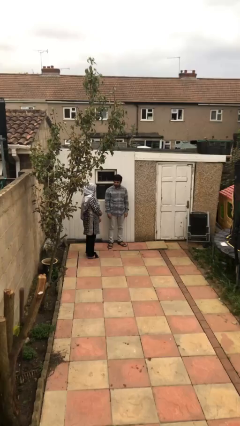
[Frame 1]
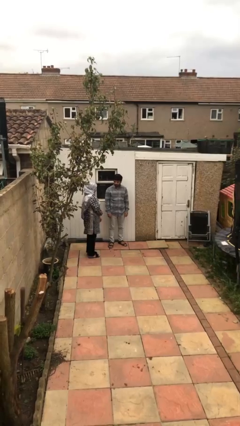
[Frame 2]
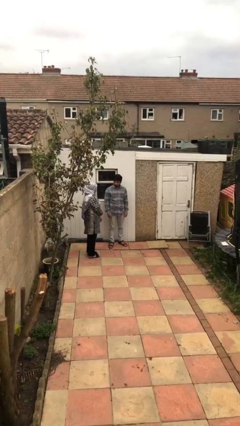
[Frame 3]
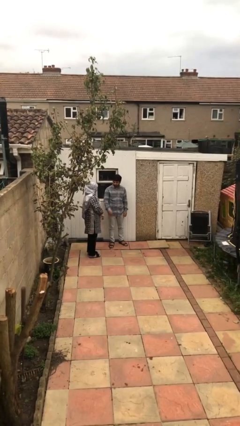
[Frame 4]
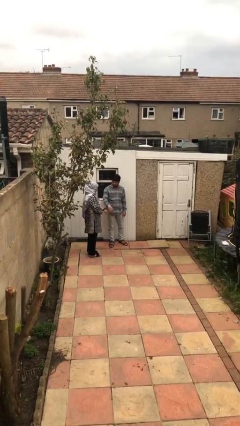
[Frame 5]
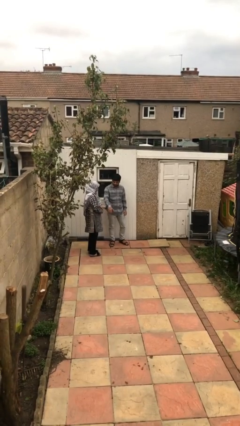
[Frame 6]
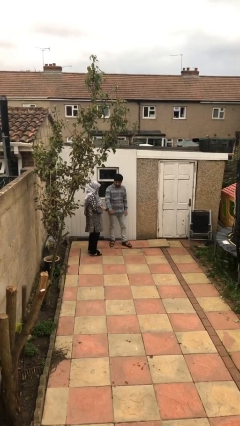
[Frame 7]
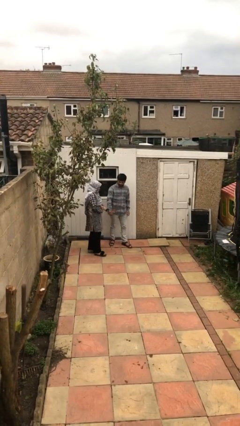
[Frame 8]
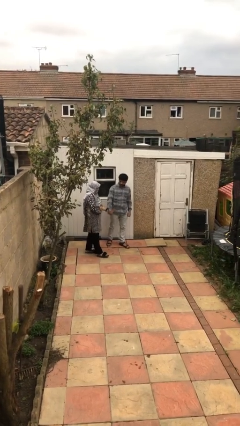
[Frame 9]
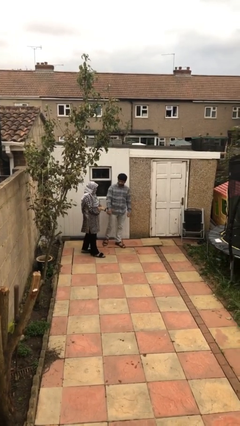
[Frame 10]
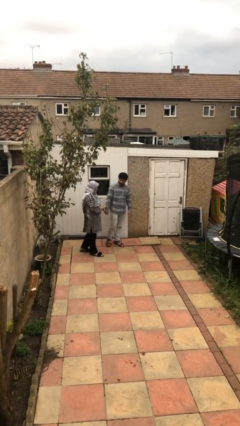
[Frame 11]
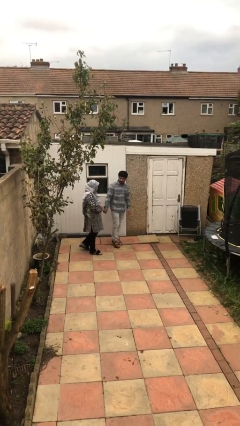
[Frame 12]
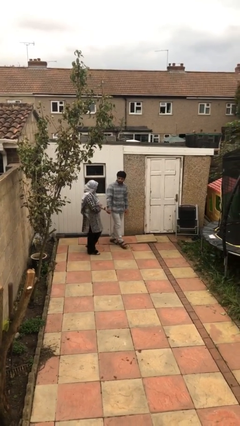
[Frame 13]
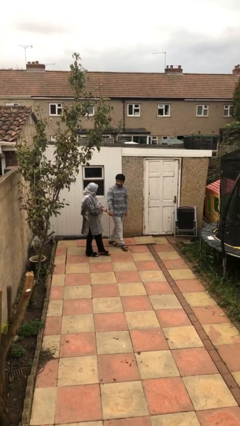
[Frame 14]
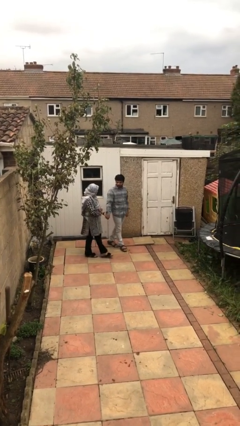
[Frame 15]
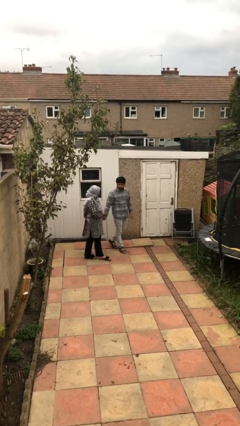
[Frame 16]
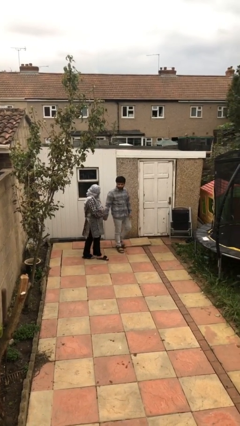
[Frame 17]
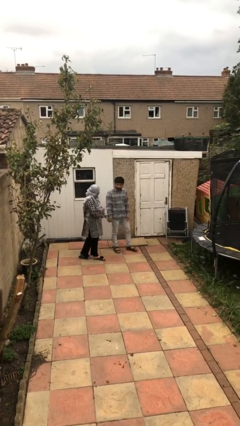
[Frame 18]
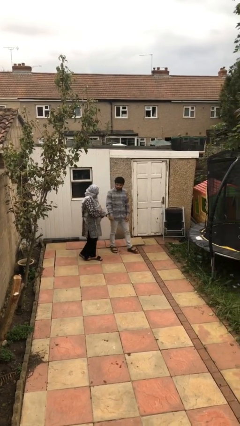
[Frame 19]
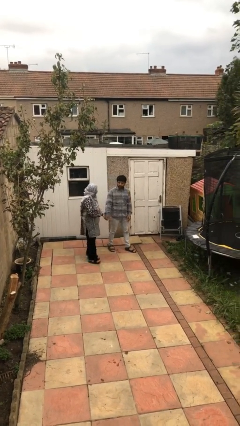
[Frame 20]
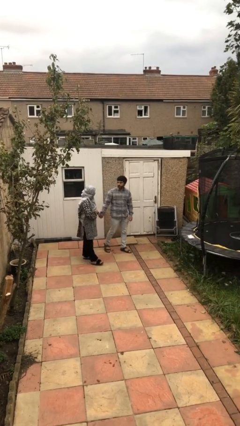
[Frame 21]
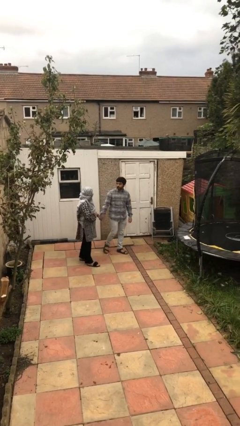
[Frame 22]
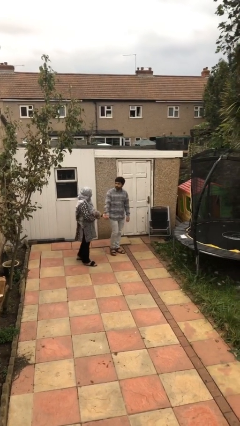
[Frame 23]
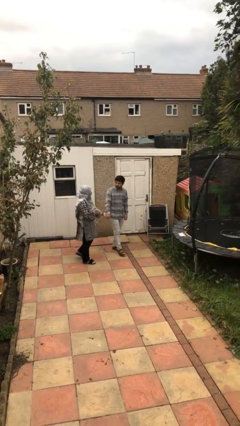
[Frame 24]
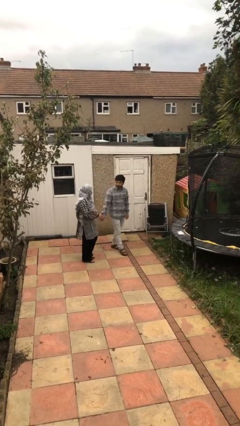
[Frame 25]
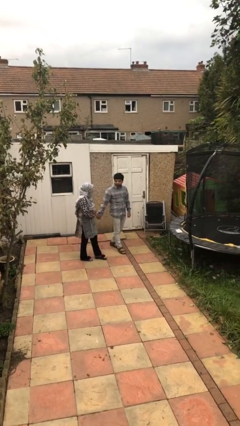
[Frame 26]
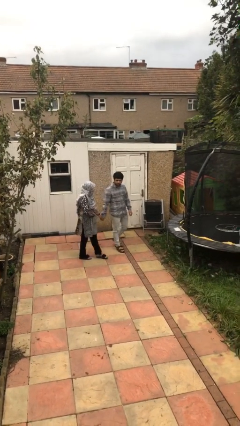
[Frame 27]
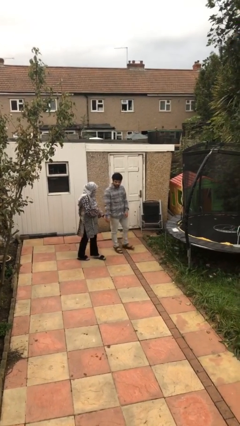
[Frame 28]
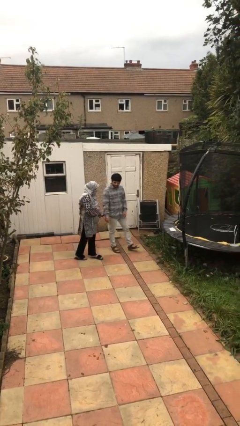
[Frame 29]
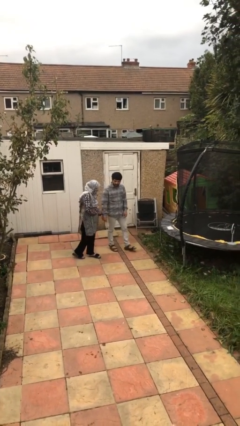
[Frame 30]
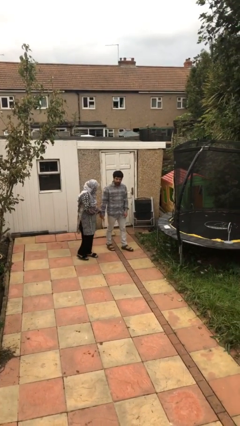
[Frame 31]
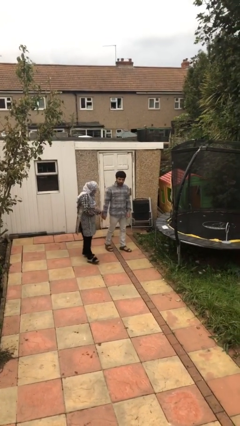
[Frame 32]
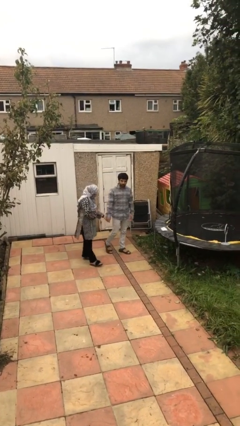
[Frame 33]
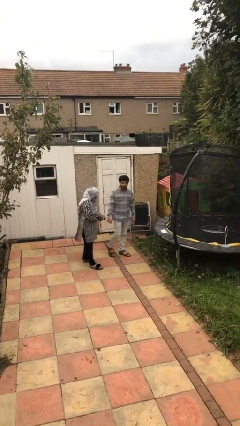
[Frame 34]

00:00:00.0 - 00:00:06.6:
person holds hand

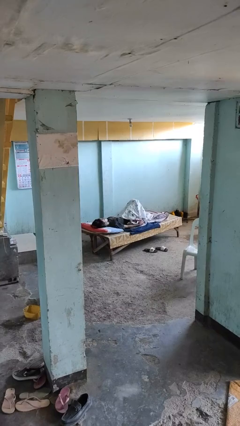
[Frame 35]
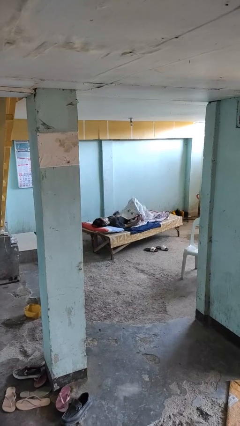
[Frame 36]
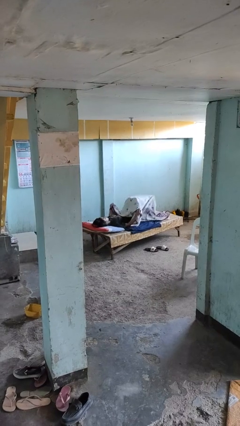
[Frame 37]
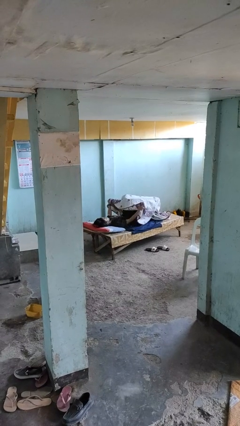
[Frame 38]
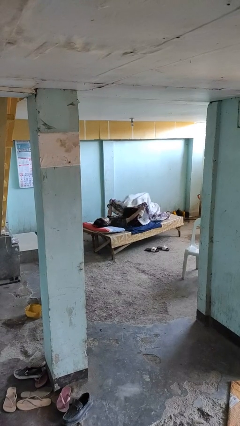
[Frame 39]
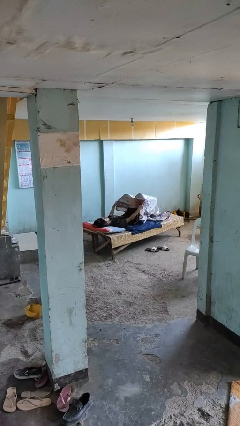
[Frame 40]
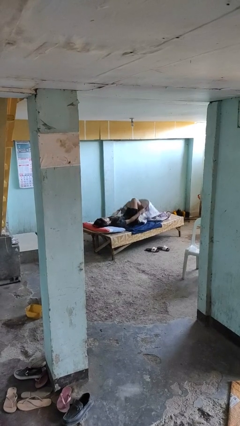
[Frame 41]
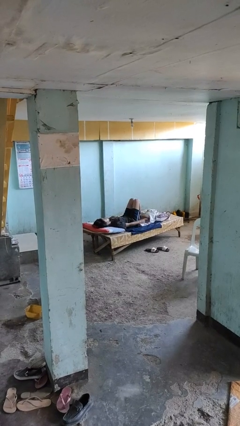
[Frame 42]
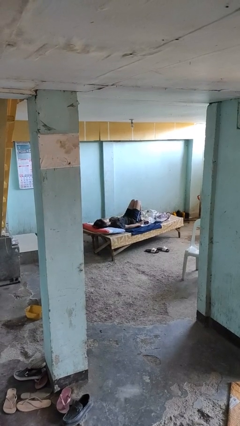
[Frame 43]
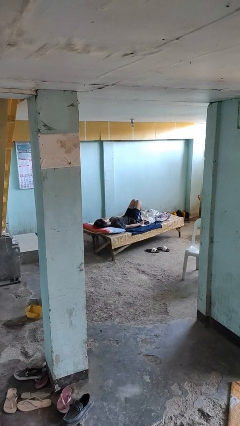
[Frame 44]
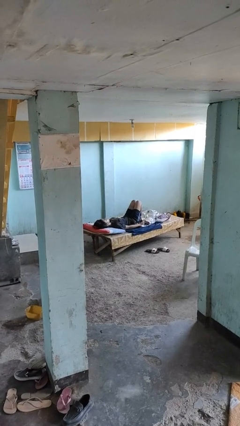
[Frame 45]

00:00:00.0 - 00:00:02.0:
person uncovers with bedsheets

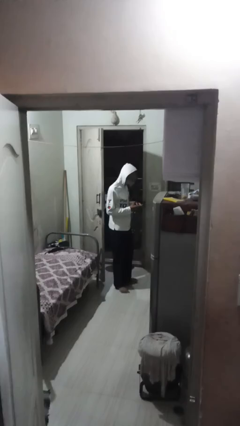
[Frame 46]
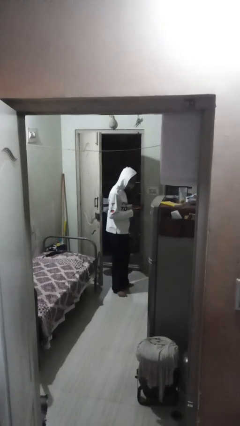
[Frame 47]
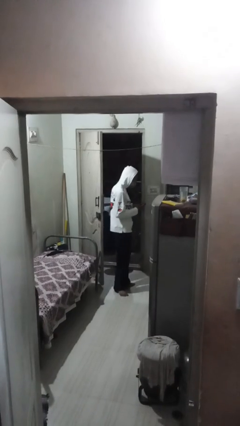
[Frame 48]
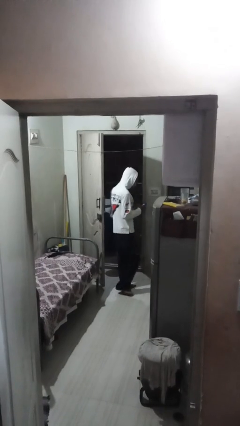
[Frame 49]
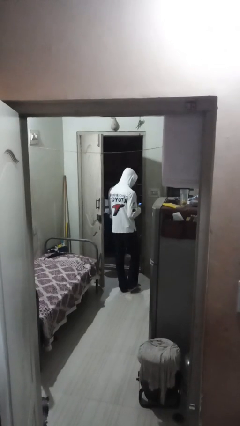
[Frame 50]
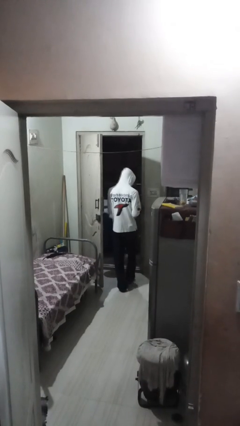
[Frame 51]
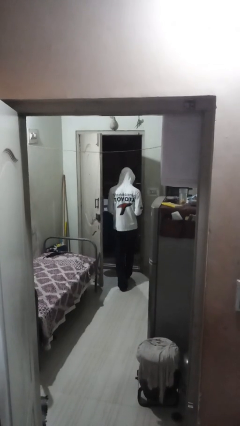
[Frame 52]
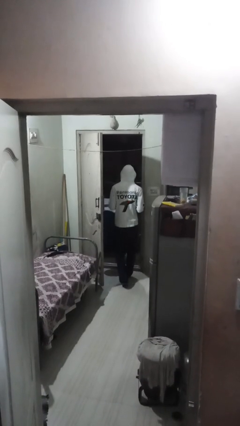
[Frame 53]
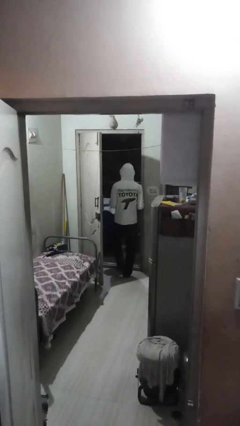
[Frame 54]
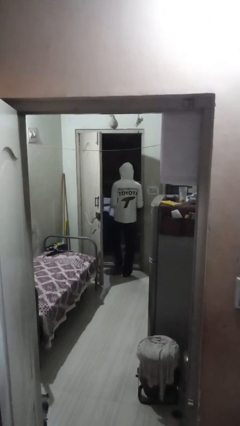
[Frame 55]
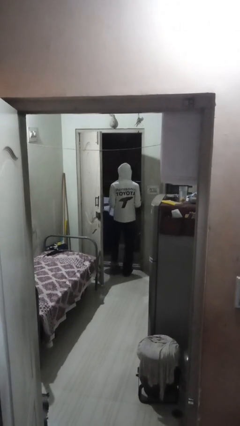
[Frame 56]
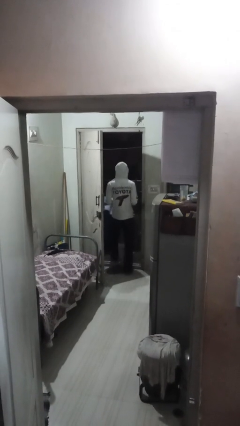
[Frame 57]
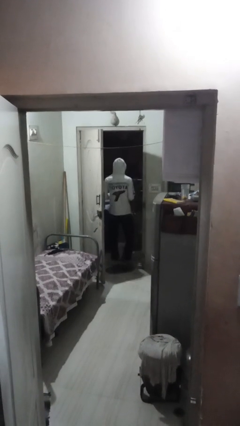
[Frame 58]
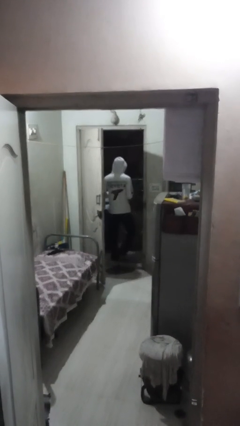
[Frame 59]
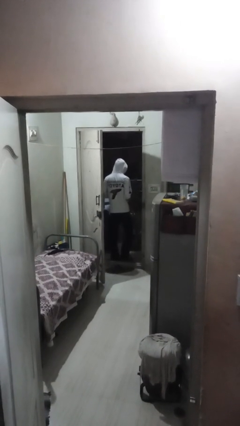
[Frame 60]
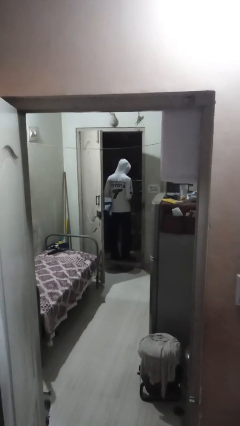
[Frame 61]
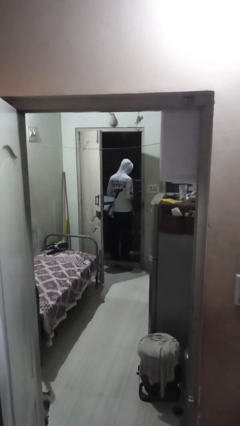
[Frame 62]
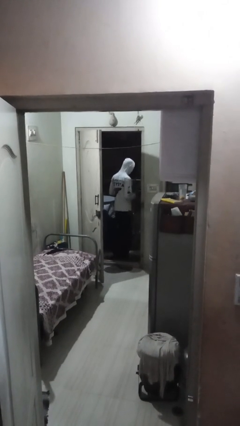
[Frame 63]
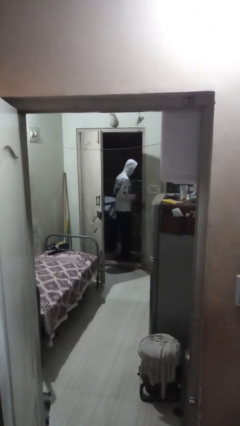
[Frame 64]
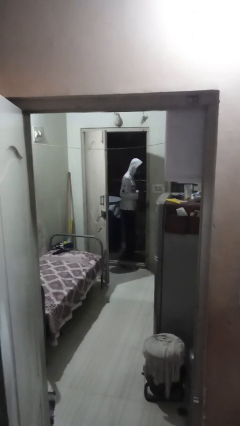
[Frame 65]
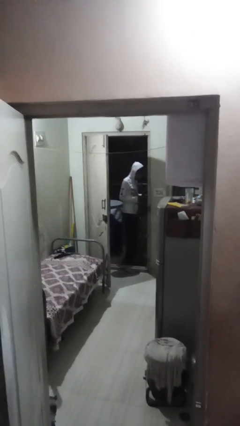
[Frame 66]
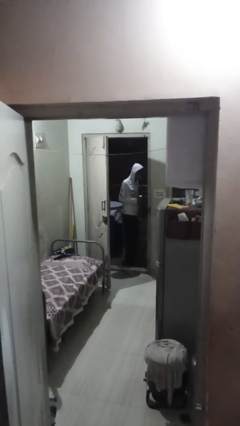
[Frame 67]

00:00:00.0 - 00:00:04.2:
person exits scene through structure

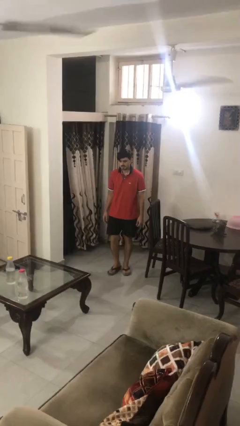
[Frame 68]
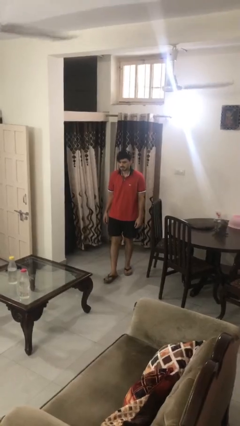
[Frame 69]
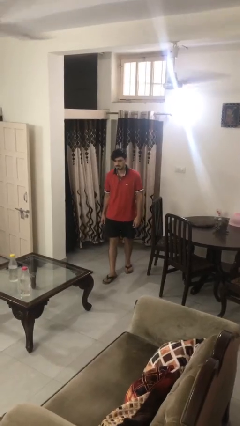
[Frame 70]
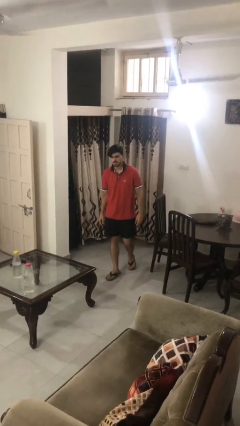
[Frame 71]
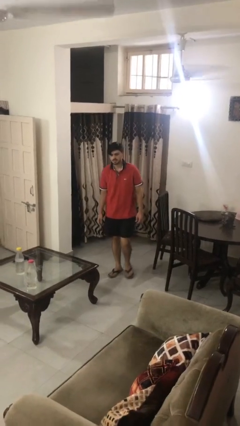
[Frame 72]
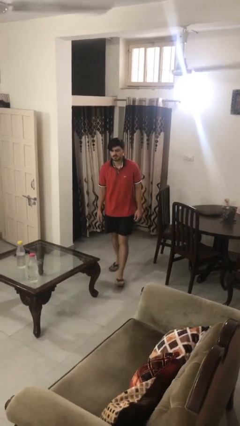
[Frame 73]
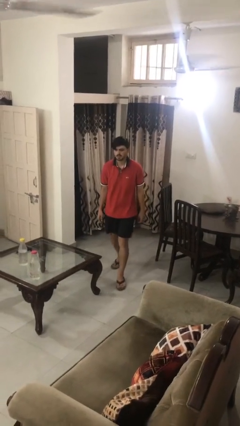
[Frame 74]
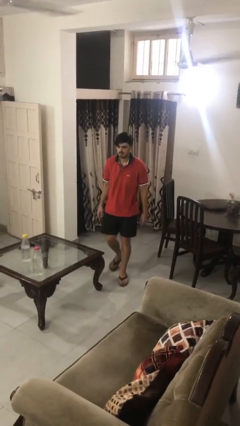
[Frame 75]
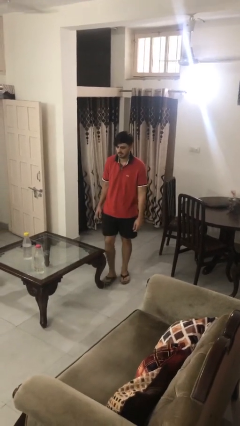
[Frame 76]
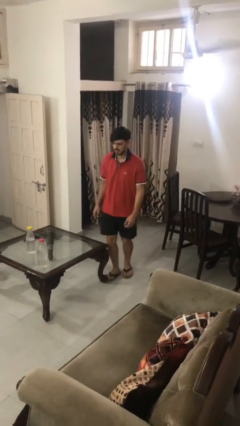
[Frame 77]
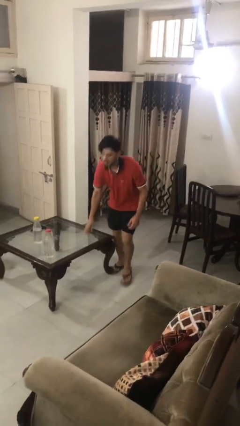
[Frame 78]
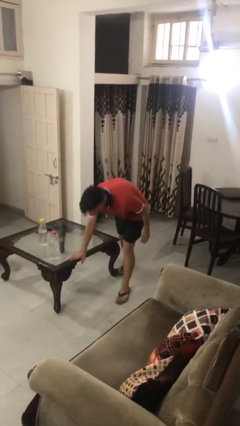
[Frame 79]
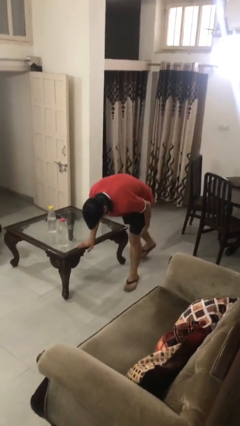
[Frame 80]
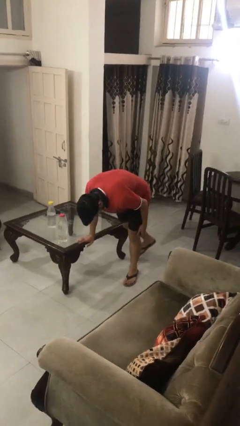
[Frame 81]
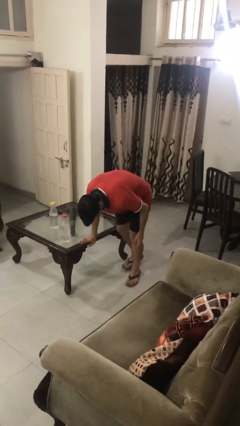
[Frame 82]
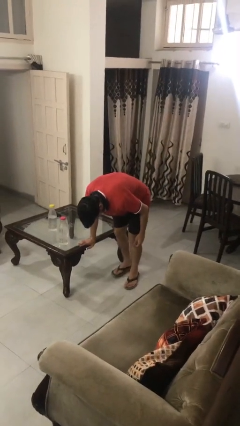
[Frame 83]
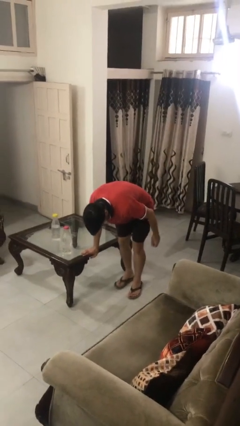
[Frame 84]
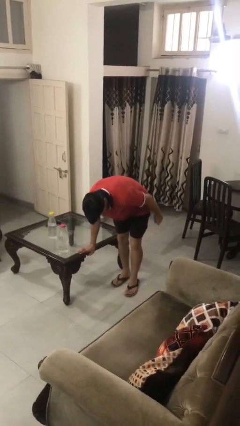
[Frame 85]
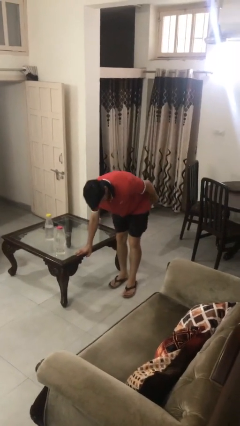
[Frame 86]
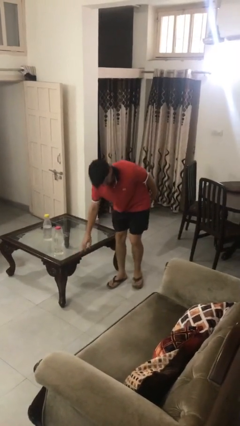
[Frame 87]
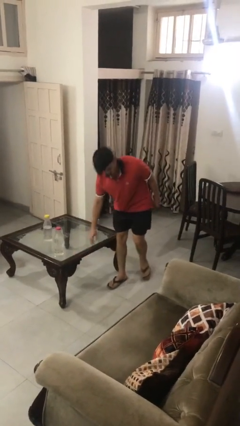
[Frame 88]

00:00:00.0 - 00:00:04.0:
person bumps into table

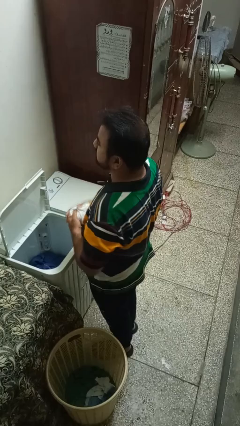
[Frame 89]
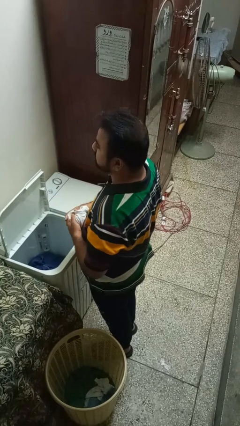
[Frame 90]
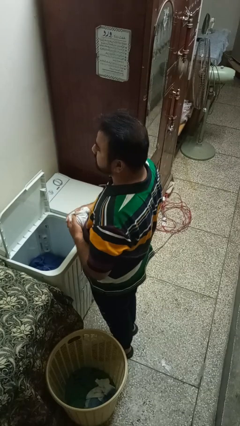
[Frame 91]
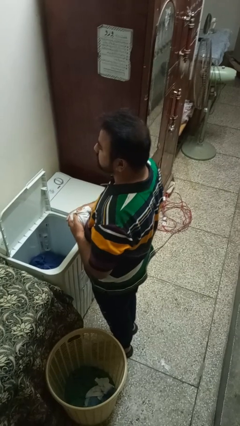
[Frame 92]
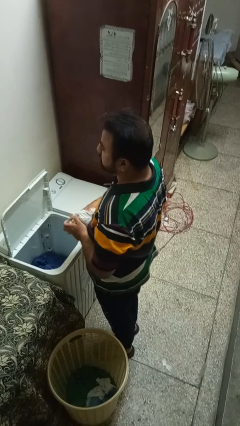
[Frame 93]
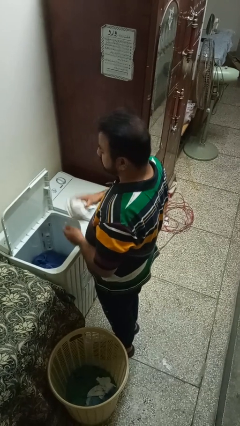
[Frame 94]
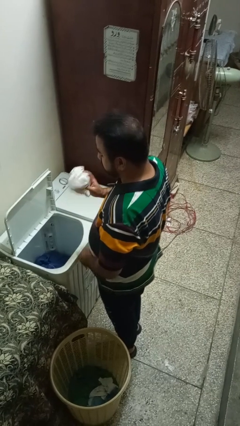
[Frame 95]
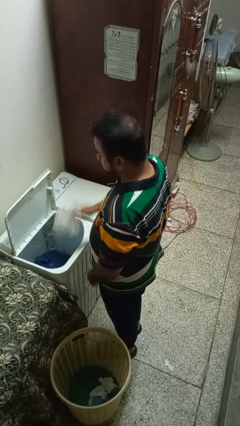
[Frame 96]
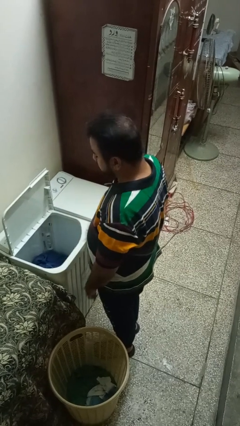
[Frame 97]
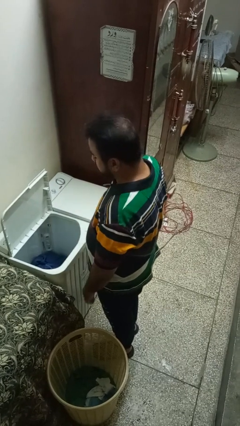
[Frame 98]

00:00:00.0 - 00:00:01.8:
person loads clotheswasher
